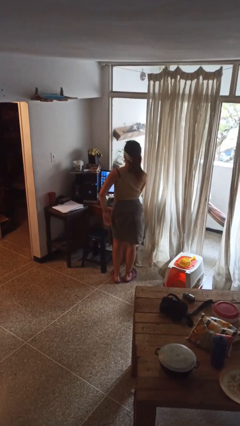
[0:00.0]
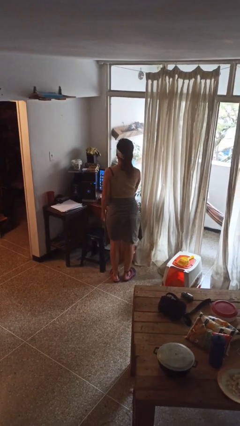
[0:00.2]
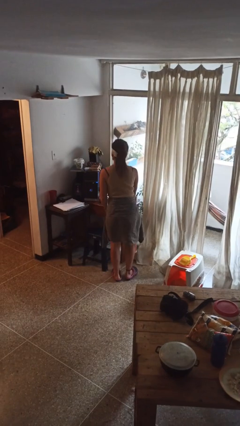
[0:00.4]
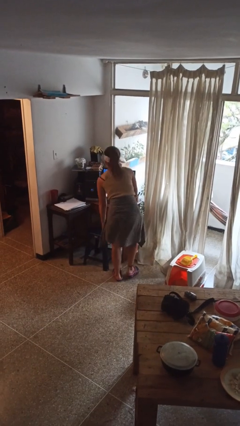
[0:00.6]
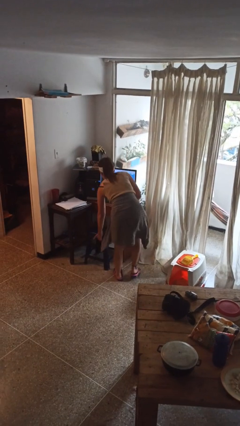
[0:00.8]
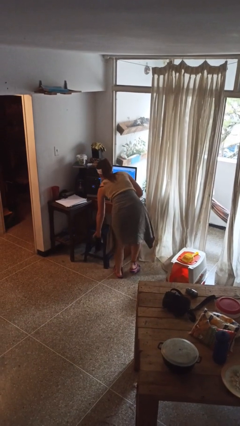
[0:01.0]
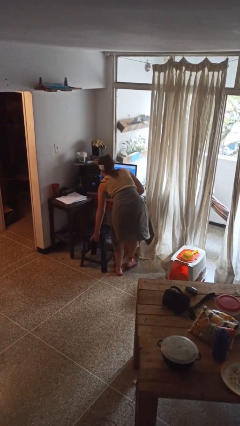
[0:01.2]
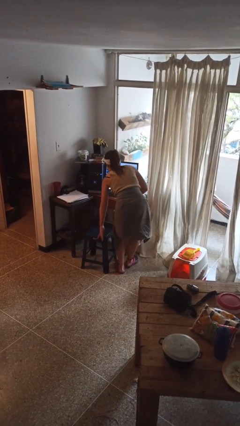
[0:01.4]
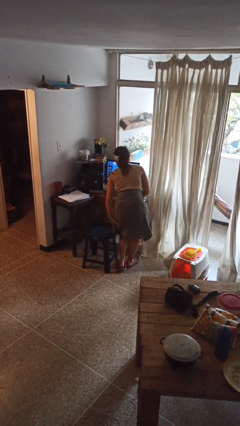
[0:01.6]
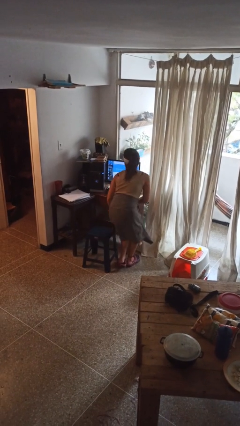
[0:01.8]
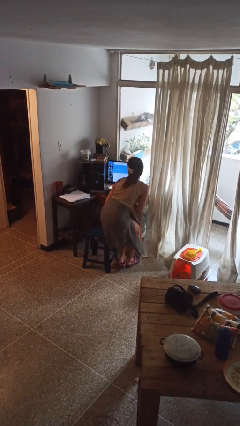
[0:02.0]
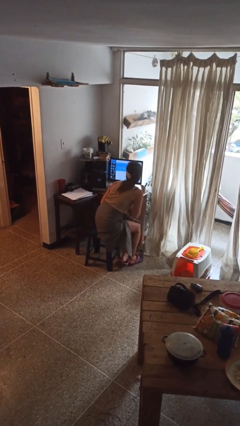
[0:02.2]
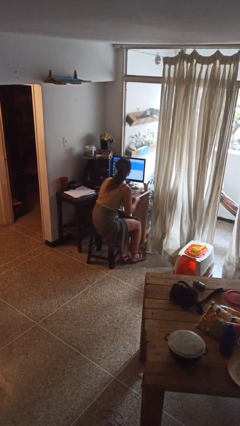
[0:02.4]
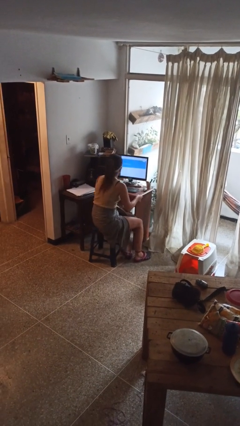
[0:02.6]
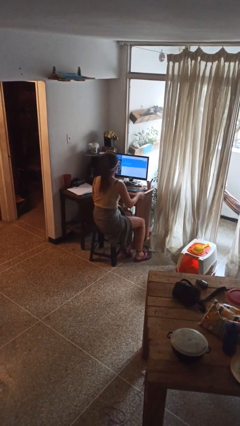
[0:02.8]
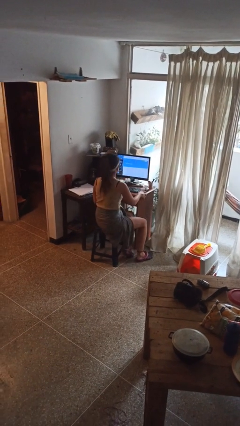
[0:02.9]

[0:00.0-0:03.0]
person sits down

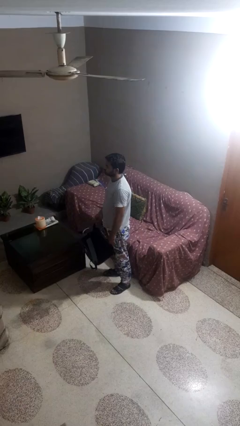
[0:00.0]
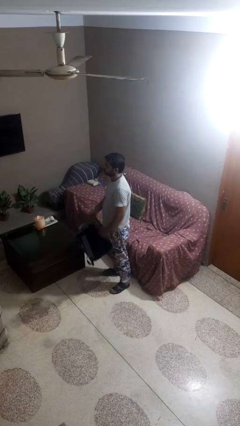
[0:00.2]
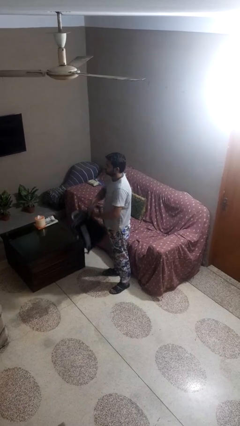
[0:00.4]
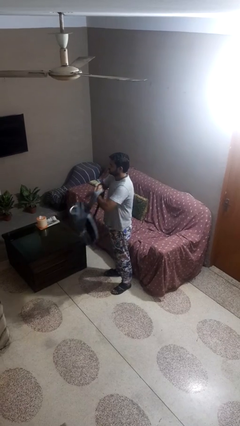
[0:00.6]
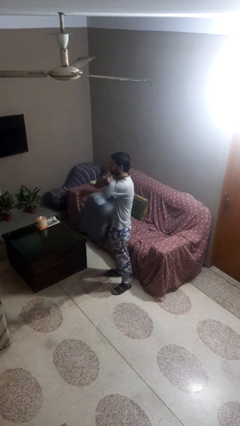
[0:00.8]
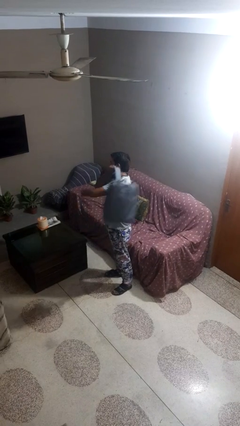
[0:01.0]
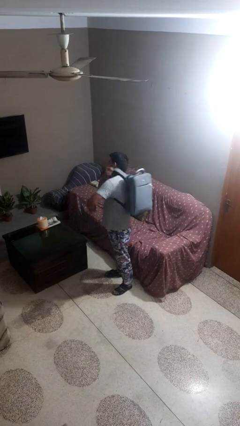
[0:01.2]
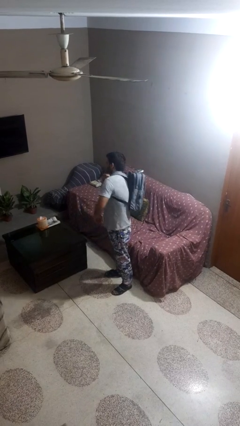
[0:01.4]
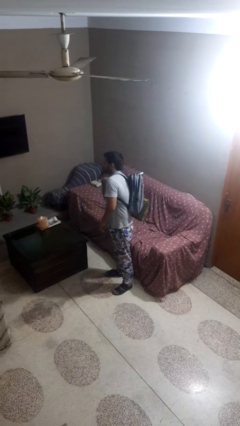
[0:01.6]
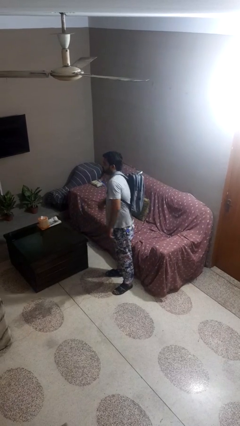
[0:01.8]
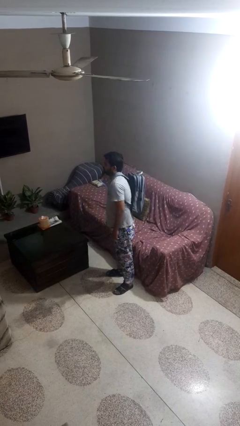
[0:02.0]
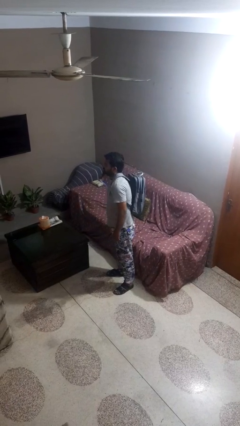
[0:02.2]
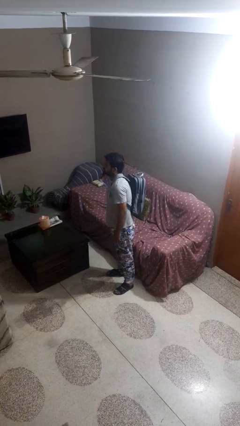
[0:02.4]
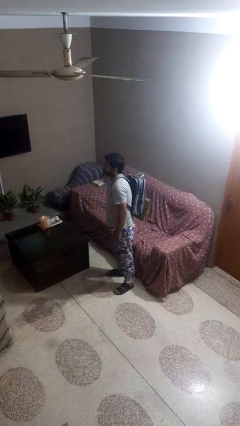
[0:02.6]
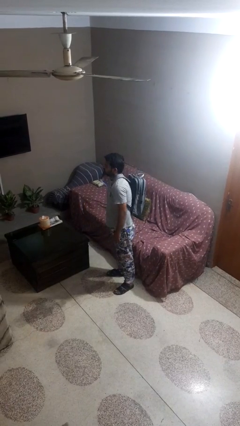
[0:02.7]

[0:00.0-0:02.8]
person puts on backpack

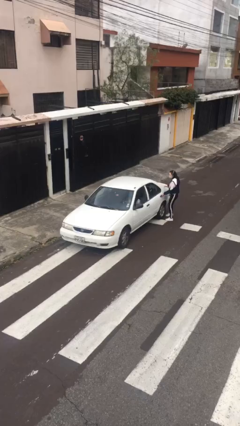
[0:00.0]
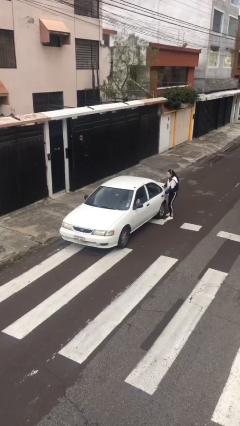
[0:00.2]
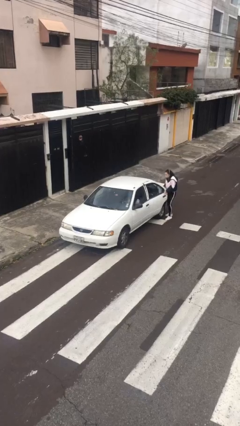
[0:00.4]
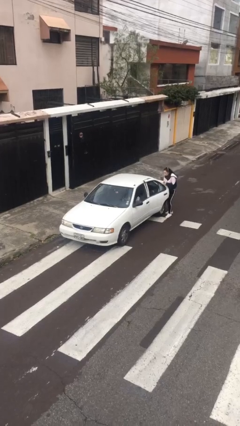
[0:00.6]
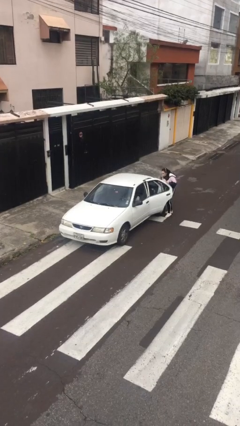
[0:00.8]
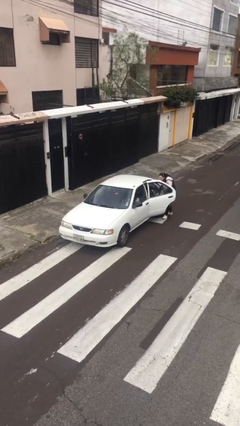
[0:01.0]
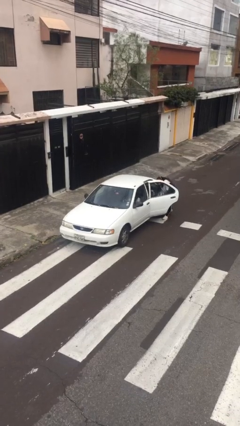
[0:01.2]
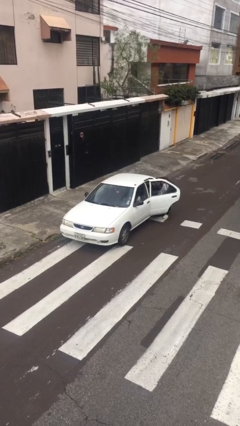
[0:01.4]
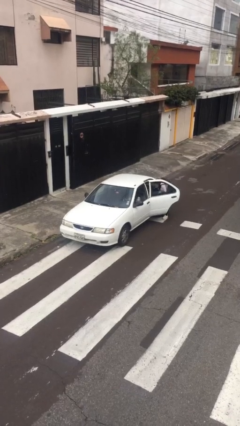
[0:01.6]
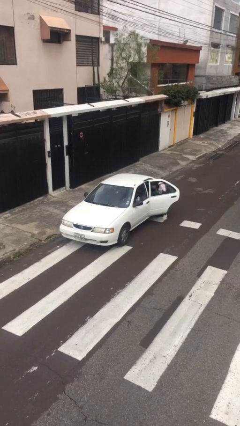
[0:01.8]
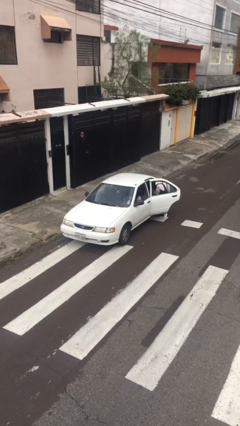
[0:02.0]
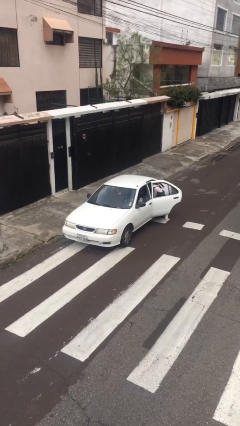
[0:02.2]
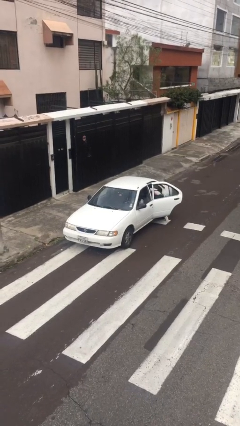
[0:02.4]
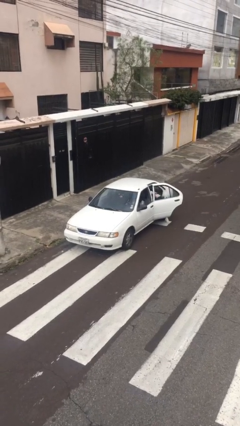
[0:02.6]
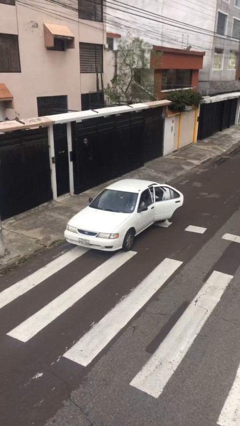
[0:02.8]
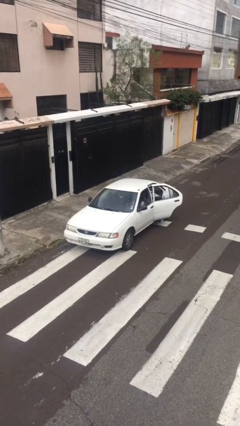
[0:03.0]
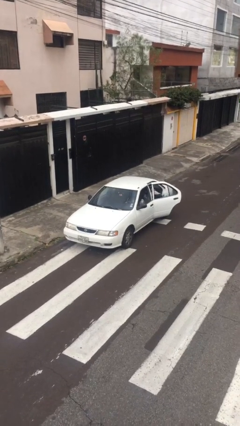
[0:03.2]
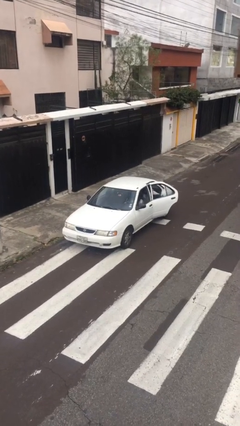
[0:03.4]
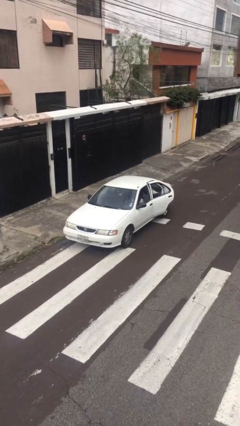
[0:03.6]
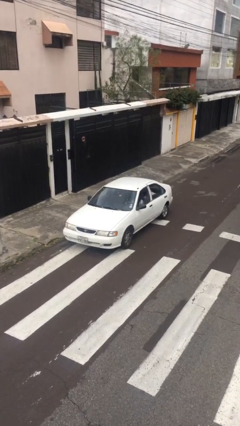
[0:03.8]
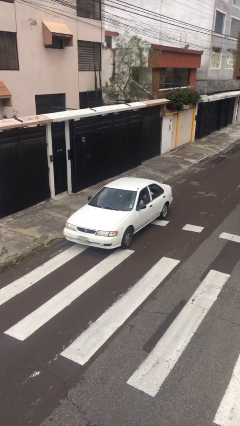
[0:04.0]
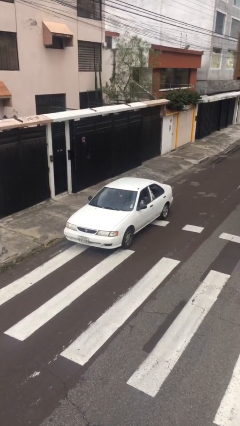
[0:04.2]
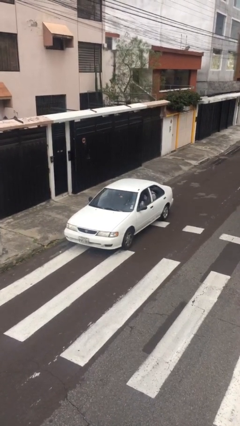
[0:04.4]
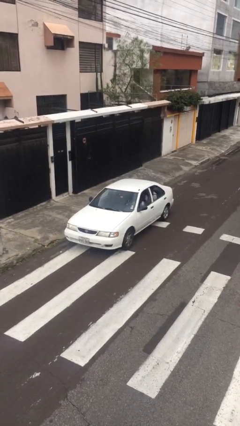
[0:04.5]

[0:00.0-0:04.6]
car picks up person

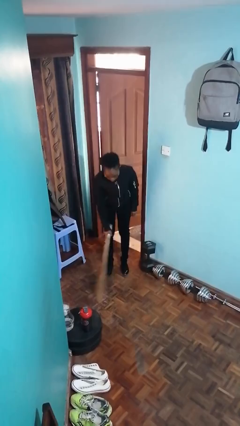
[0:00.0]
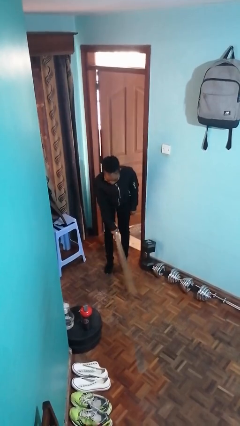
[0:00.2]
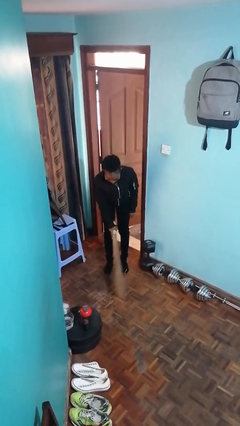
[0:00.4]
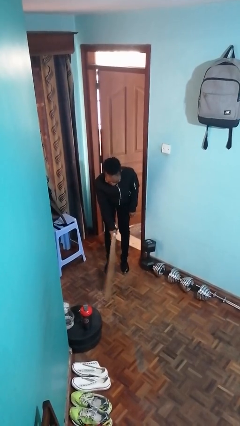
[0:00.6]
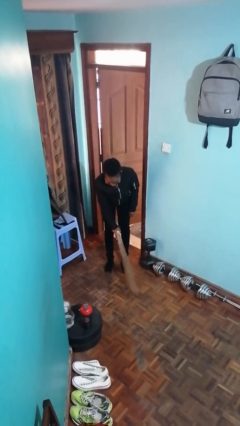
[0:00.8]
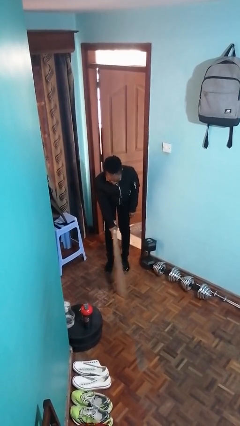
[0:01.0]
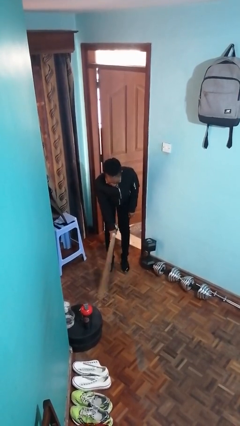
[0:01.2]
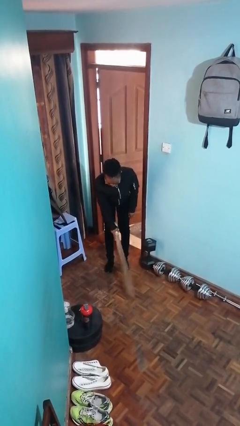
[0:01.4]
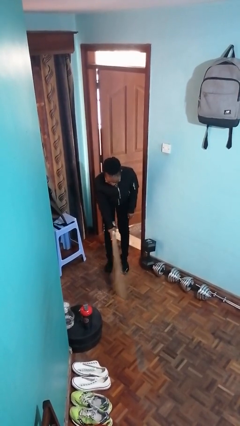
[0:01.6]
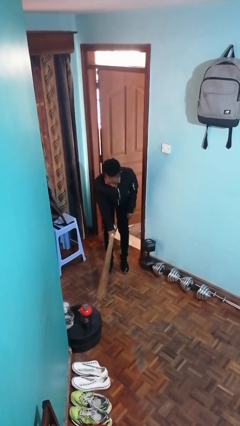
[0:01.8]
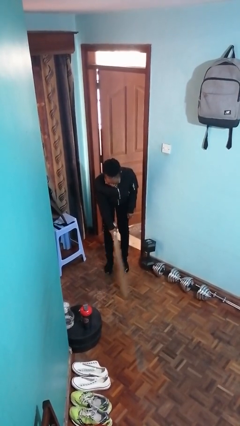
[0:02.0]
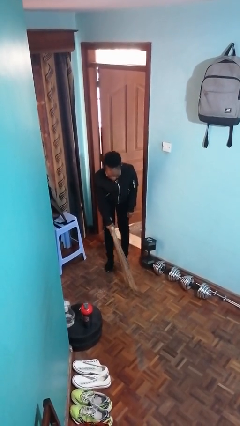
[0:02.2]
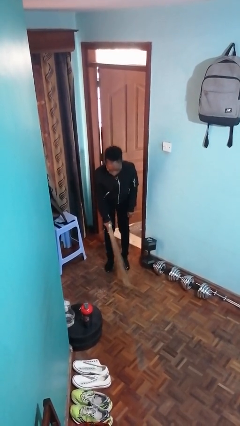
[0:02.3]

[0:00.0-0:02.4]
person sweeps floor

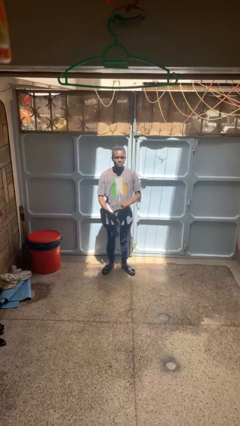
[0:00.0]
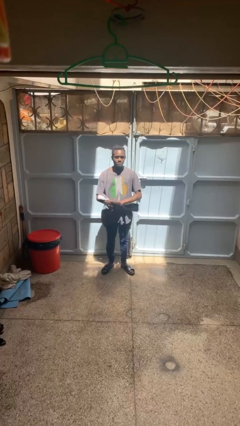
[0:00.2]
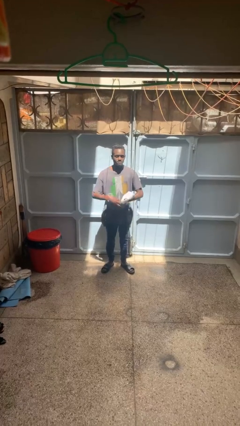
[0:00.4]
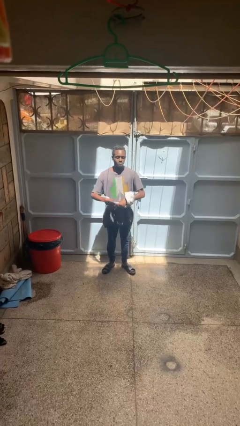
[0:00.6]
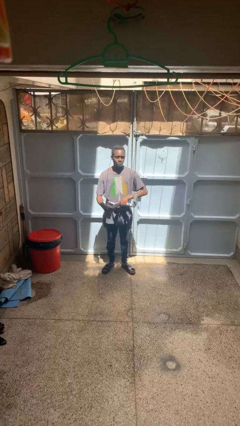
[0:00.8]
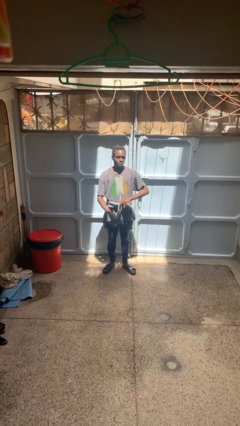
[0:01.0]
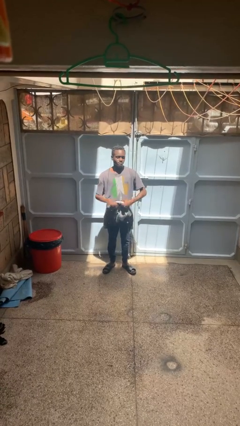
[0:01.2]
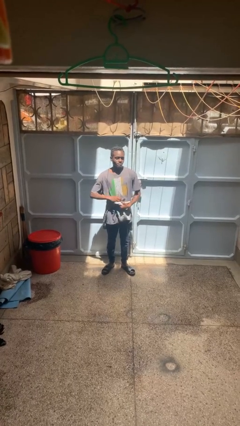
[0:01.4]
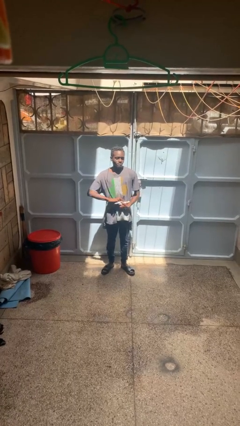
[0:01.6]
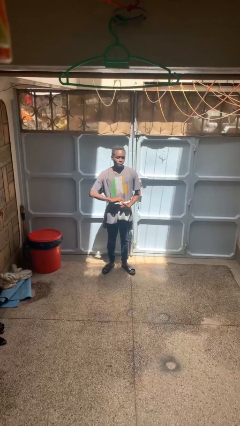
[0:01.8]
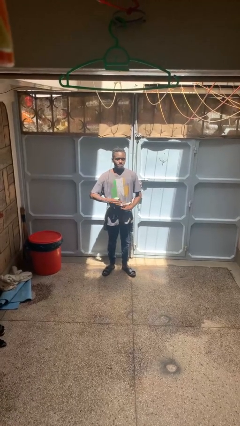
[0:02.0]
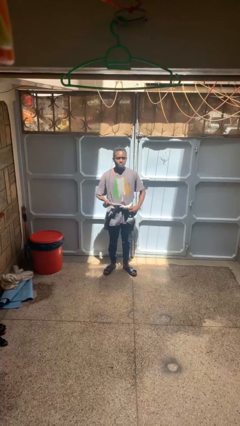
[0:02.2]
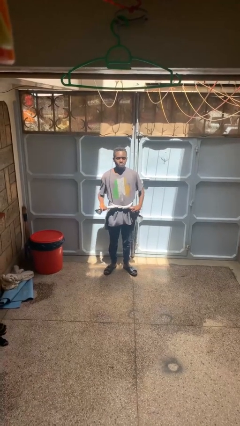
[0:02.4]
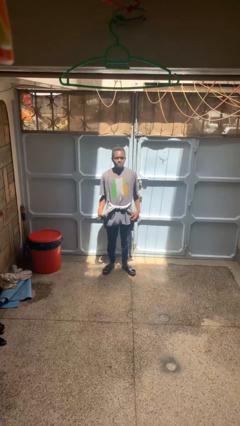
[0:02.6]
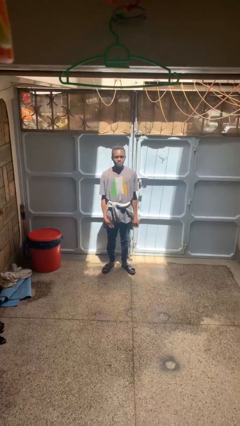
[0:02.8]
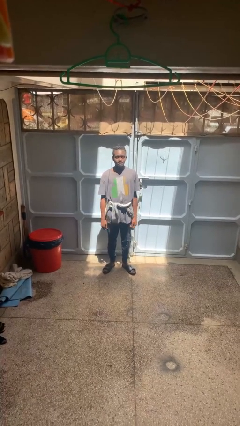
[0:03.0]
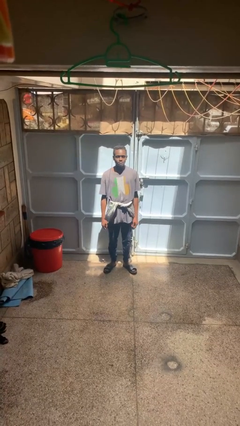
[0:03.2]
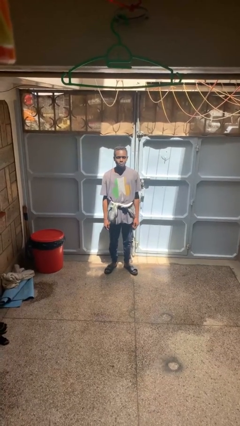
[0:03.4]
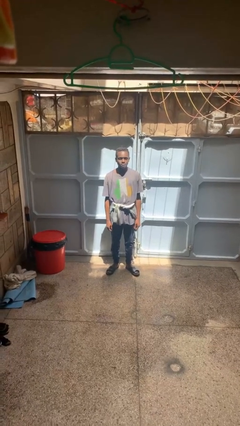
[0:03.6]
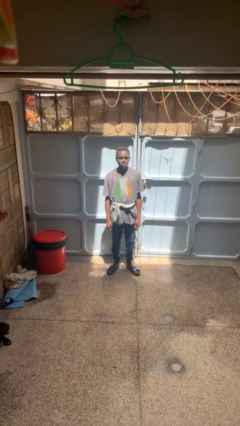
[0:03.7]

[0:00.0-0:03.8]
person ties jacket around waist

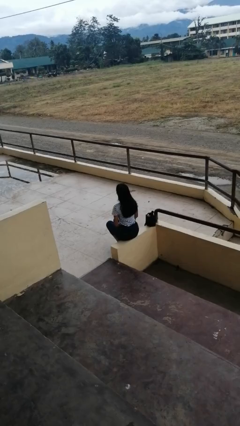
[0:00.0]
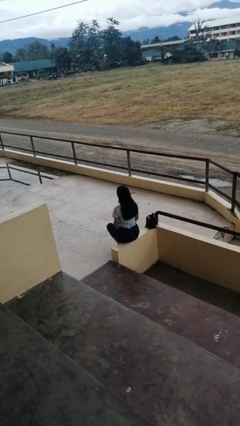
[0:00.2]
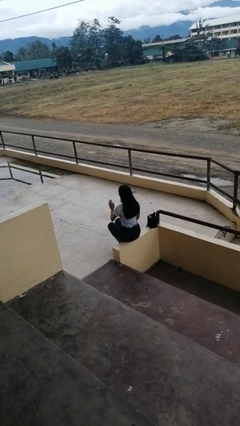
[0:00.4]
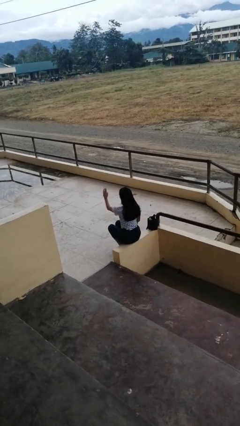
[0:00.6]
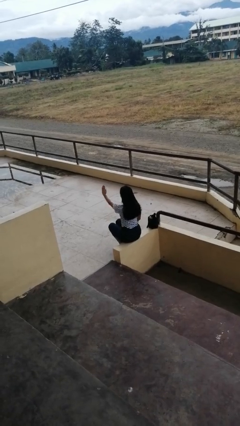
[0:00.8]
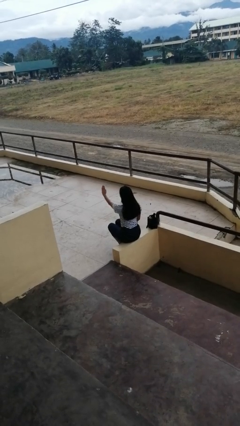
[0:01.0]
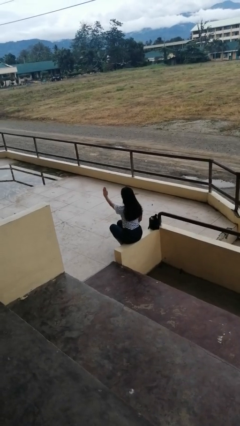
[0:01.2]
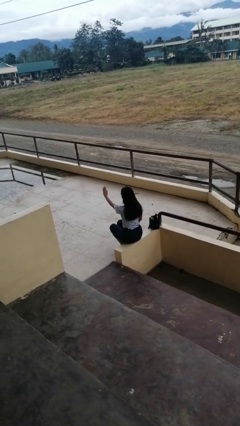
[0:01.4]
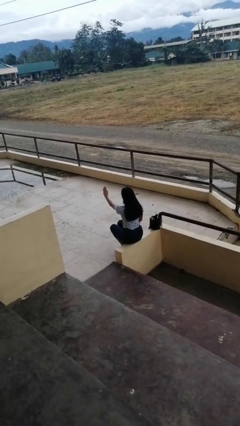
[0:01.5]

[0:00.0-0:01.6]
person gestures stop
